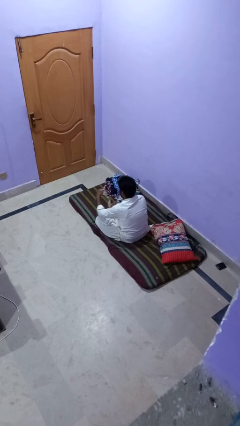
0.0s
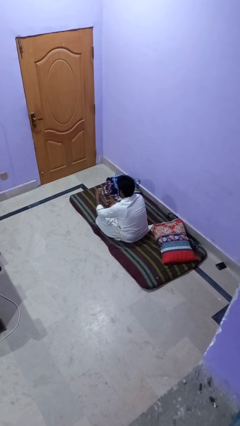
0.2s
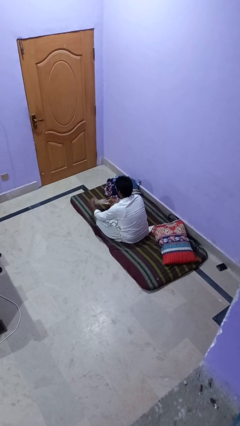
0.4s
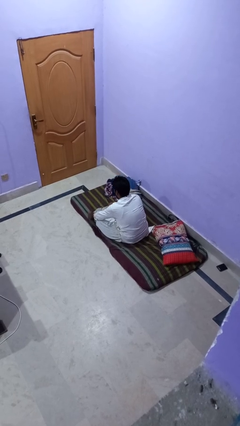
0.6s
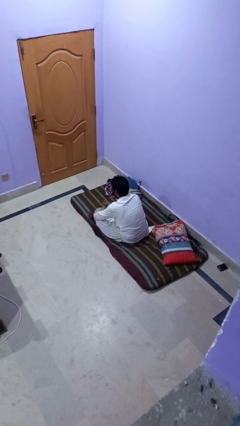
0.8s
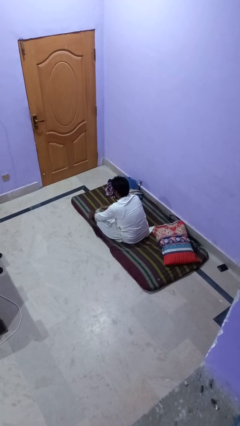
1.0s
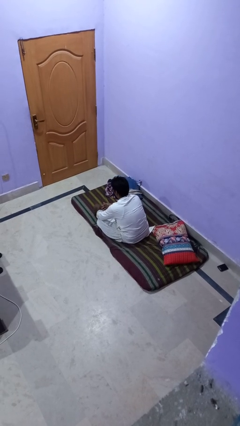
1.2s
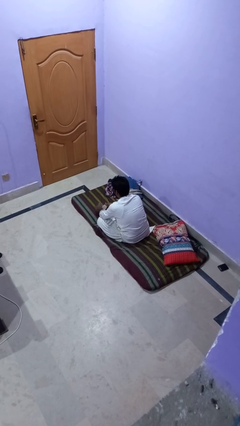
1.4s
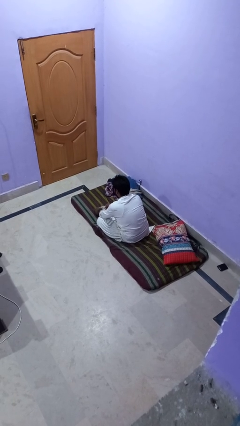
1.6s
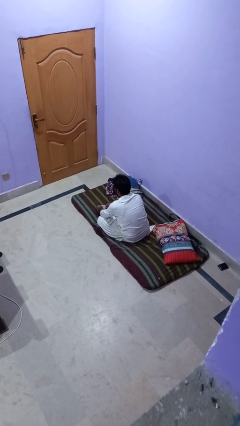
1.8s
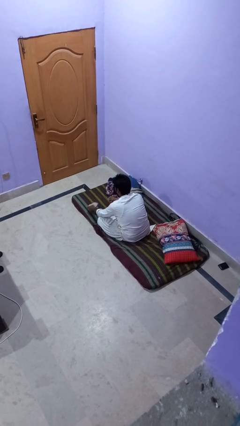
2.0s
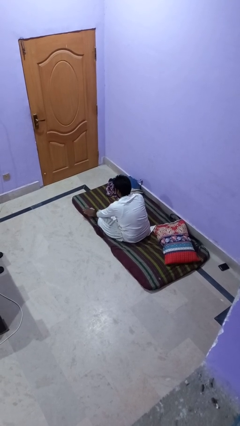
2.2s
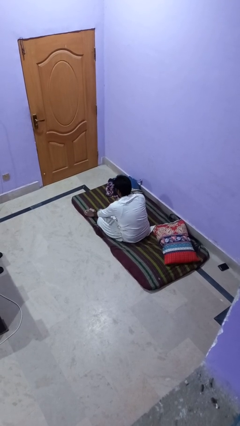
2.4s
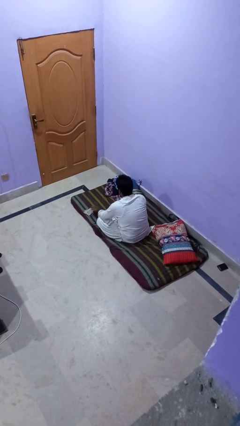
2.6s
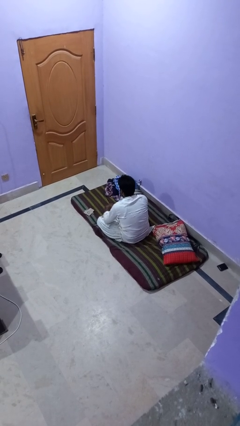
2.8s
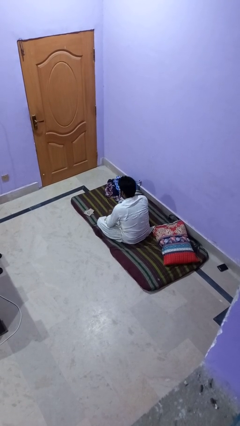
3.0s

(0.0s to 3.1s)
person folds socks

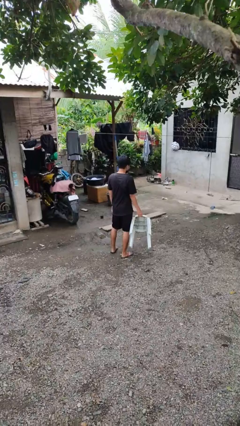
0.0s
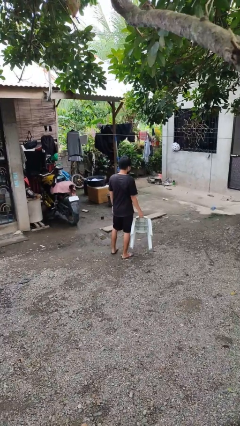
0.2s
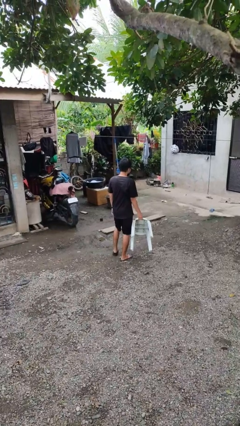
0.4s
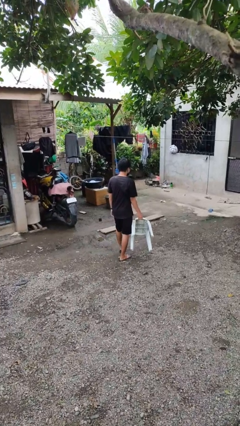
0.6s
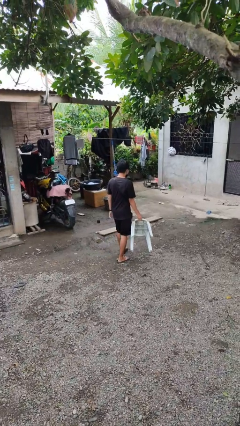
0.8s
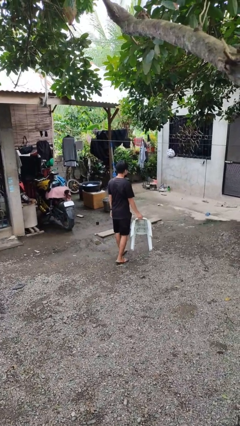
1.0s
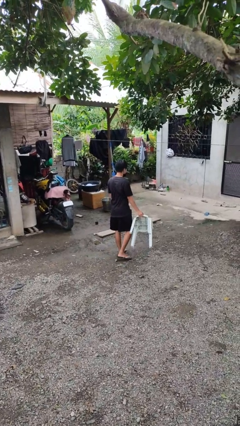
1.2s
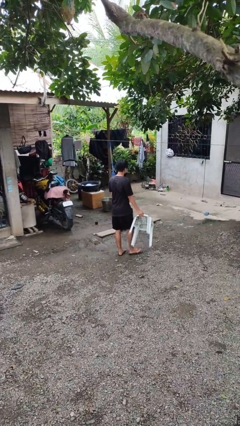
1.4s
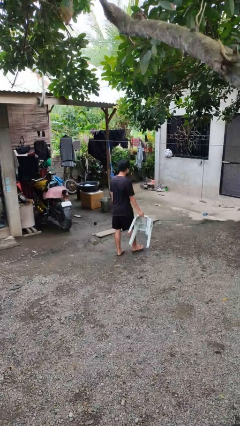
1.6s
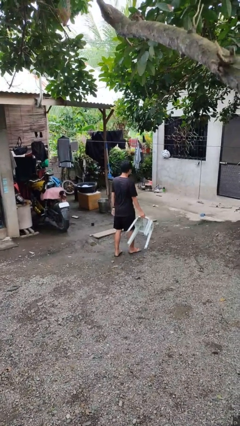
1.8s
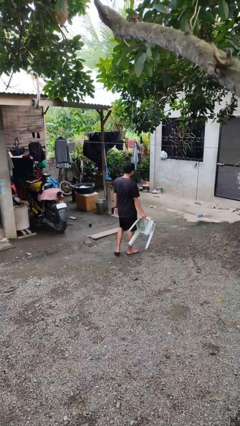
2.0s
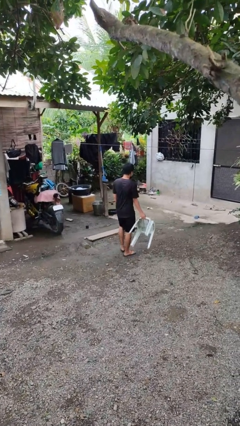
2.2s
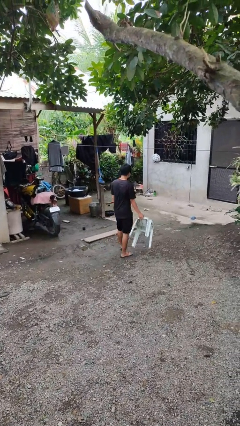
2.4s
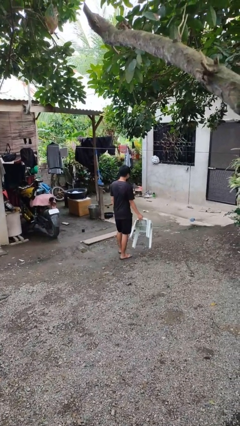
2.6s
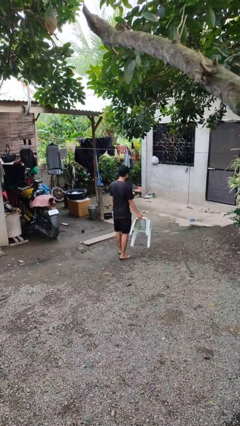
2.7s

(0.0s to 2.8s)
person carries furniture

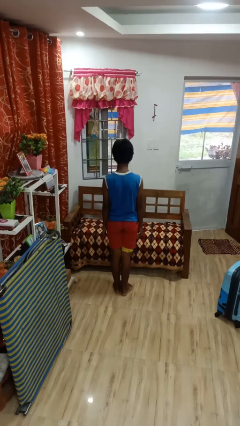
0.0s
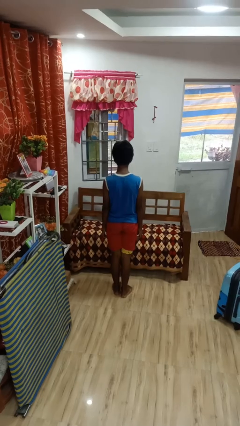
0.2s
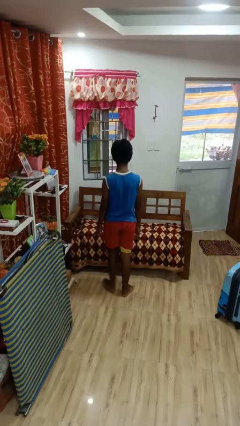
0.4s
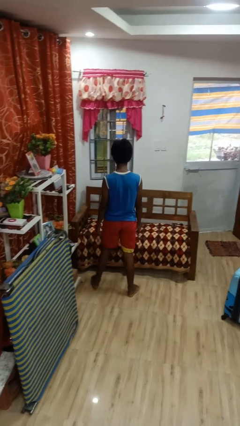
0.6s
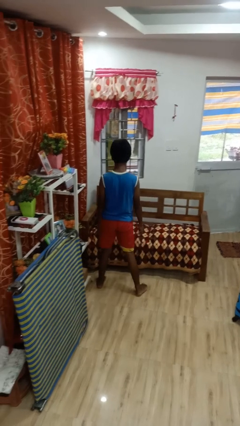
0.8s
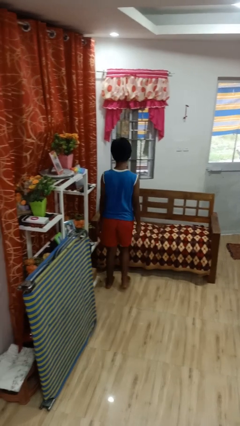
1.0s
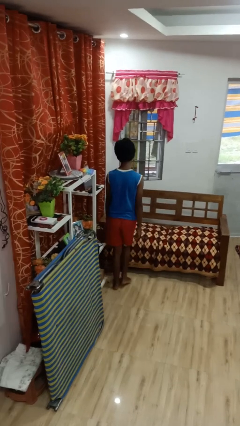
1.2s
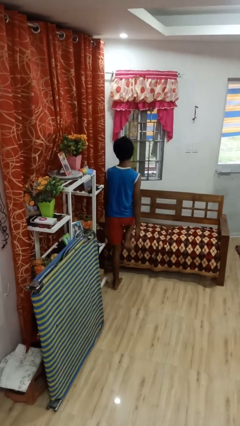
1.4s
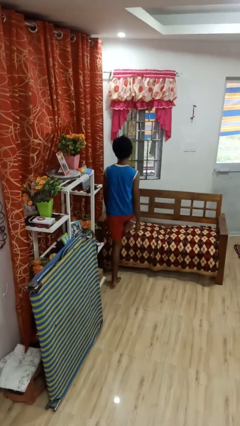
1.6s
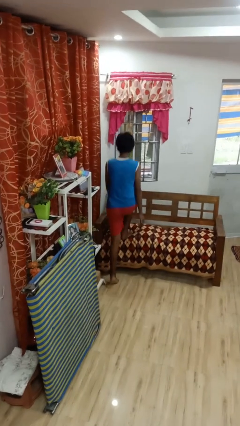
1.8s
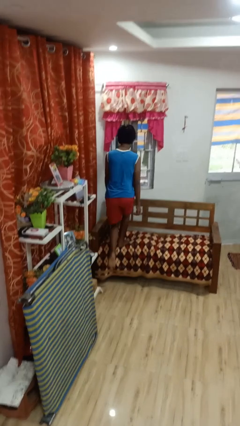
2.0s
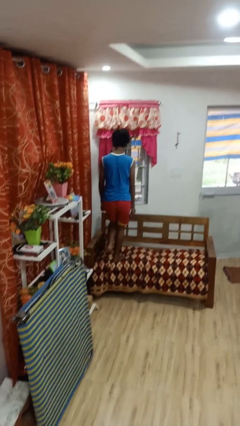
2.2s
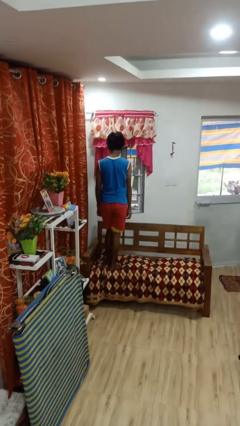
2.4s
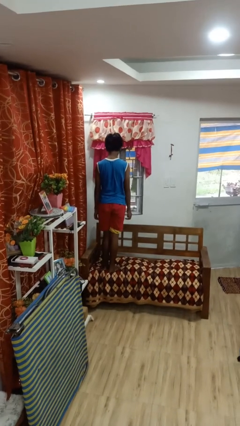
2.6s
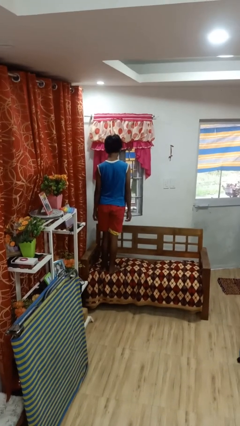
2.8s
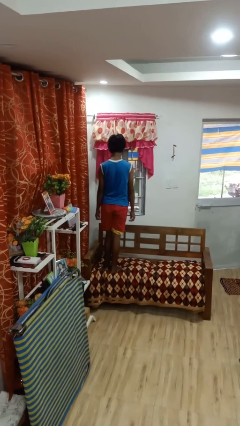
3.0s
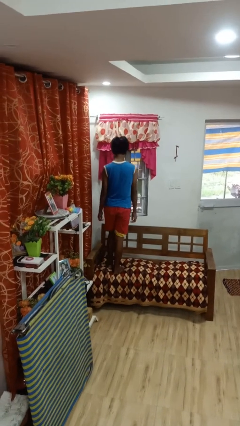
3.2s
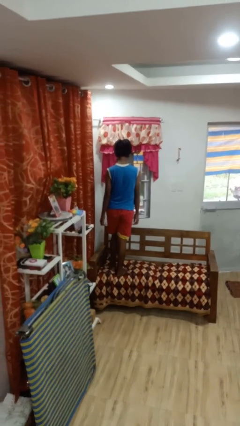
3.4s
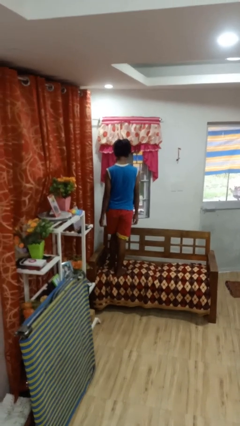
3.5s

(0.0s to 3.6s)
person climbs on couch

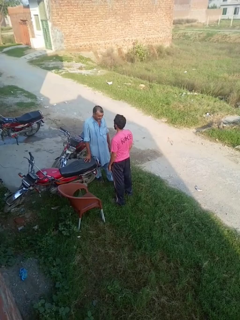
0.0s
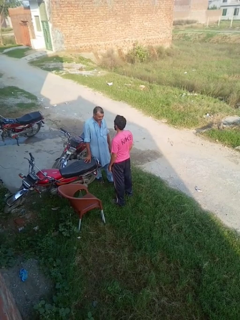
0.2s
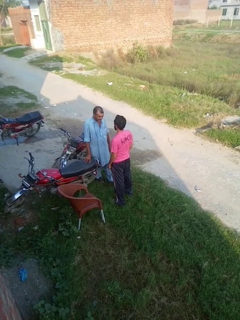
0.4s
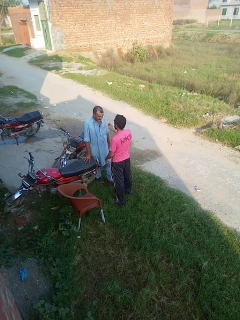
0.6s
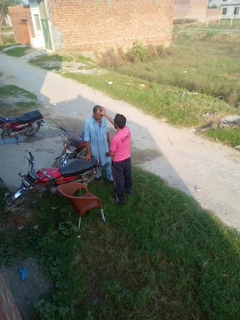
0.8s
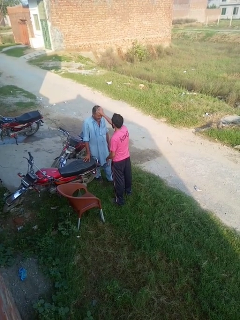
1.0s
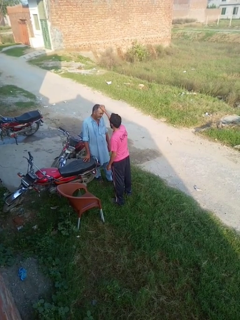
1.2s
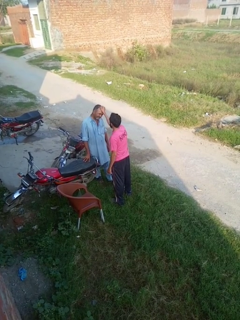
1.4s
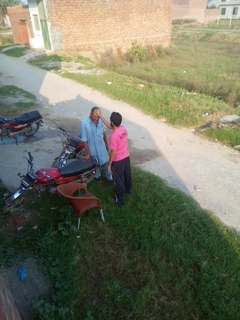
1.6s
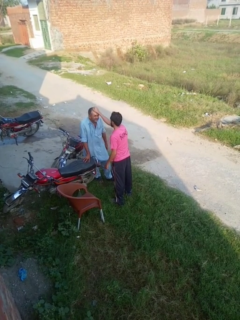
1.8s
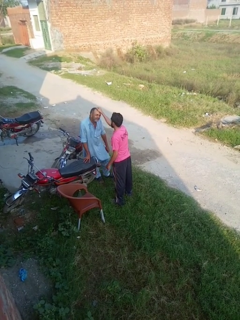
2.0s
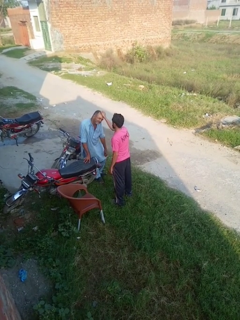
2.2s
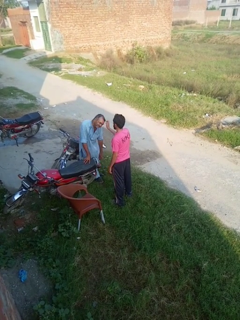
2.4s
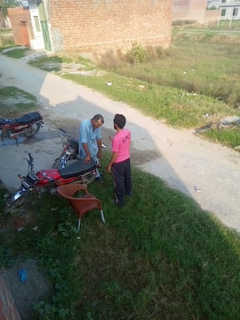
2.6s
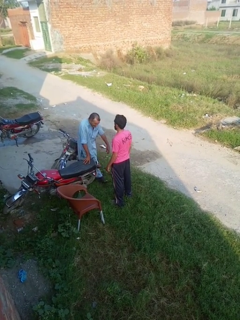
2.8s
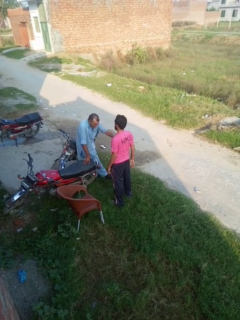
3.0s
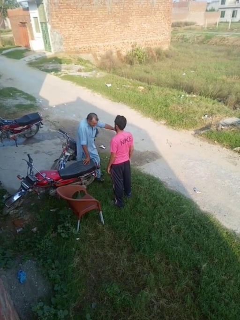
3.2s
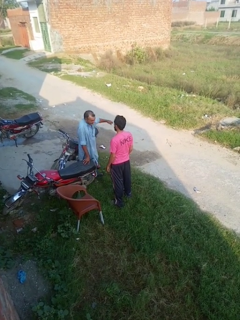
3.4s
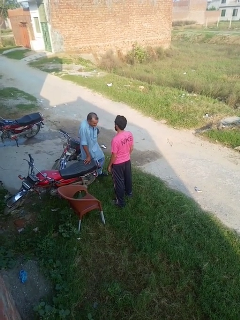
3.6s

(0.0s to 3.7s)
person grabs person by hair

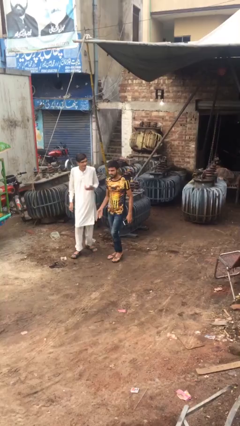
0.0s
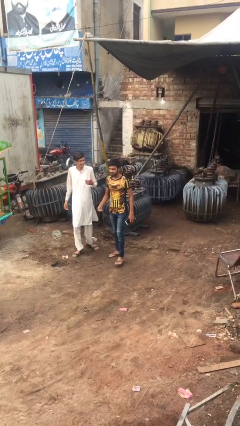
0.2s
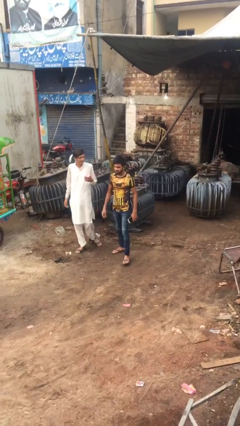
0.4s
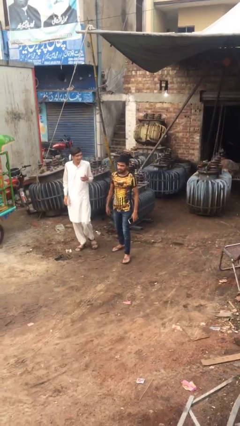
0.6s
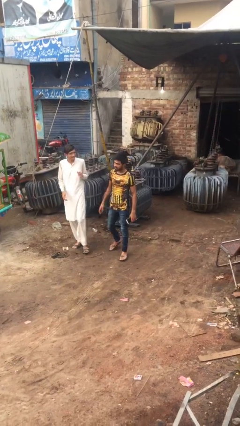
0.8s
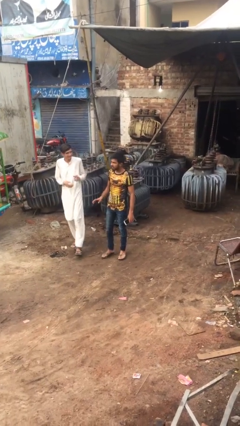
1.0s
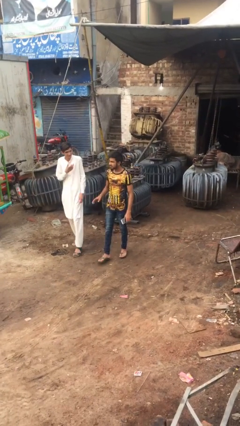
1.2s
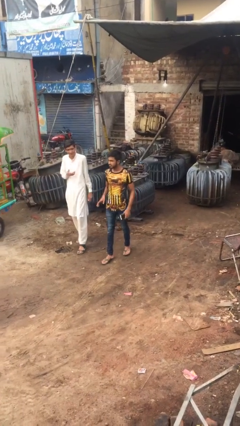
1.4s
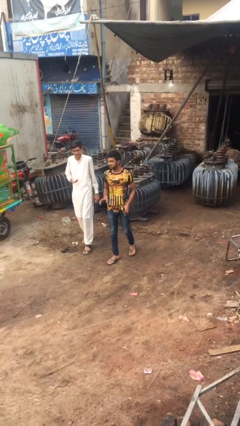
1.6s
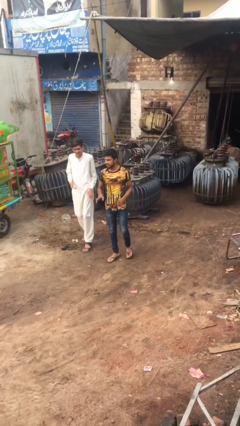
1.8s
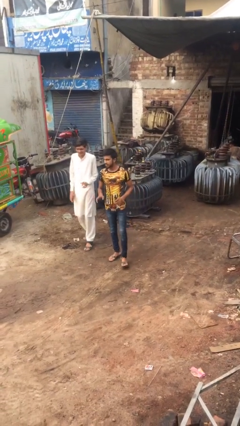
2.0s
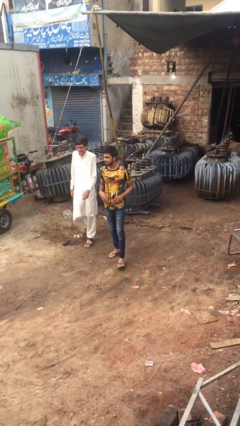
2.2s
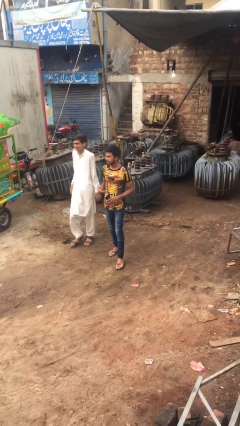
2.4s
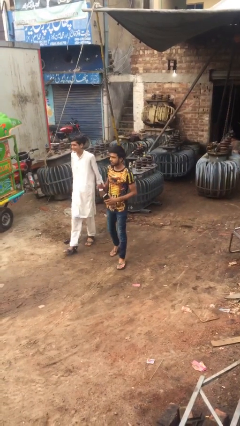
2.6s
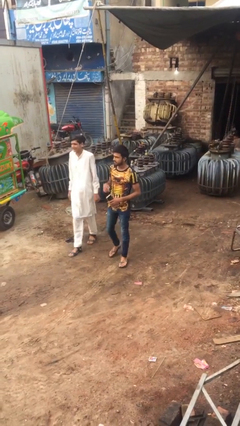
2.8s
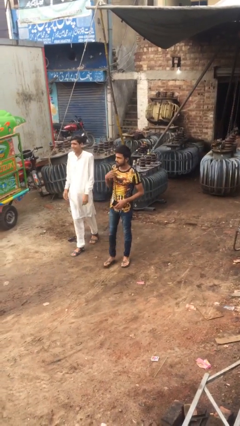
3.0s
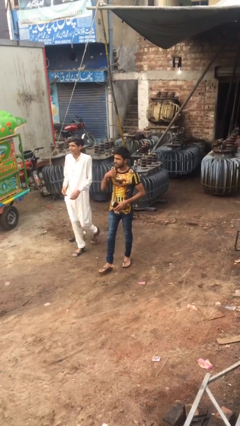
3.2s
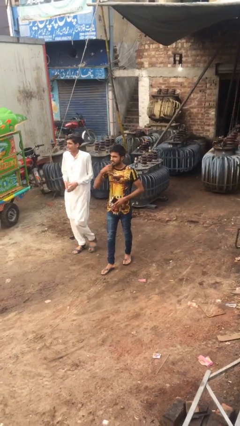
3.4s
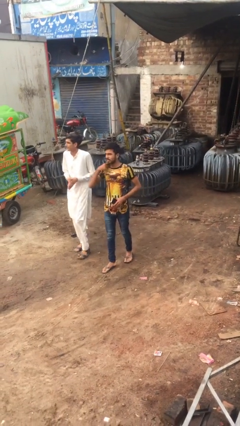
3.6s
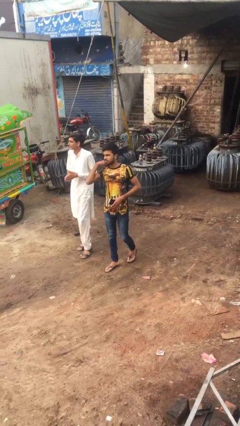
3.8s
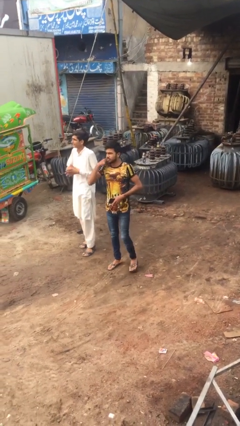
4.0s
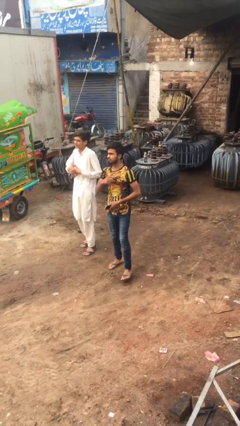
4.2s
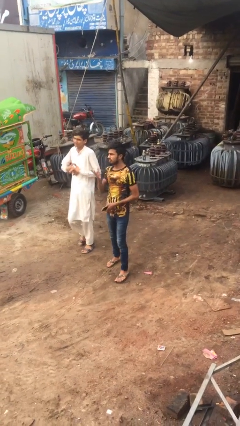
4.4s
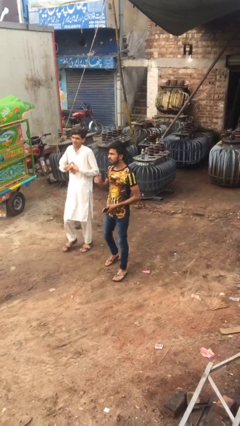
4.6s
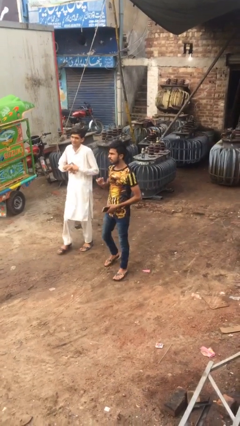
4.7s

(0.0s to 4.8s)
person talks to person

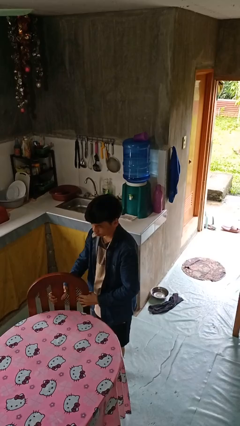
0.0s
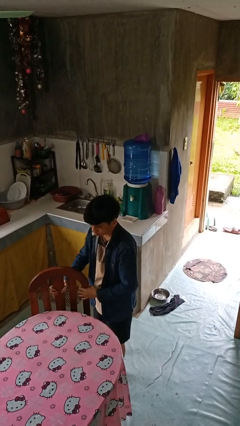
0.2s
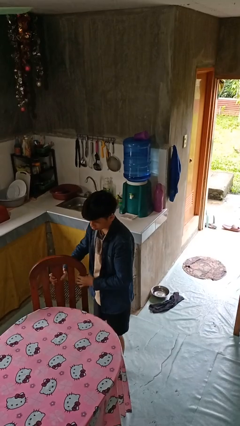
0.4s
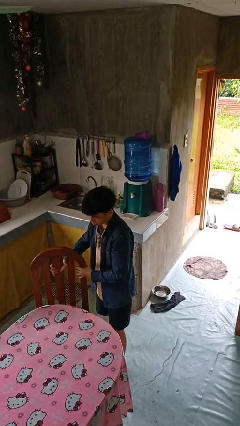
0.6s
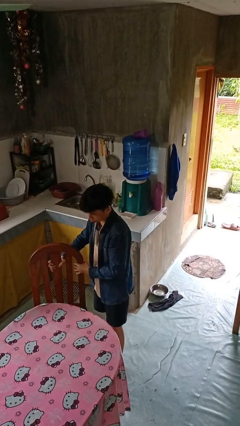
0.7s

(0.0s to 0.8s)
person pulls out chair
